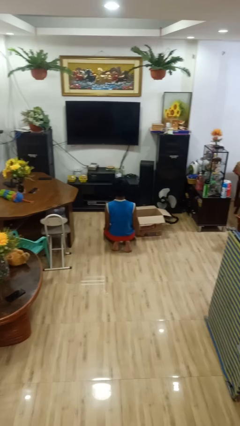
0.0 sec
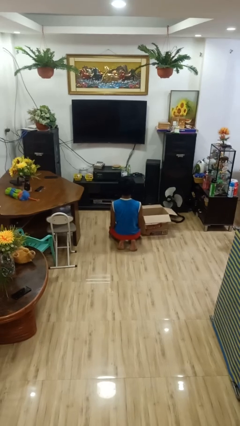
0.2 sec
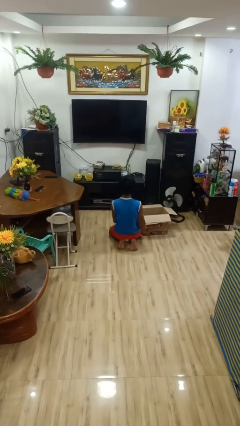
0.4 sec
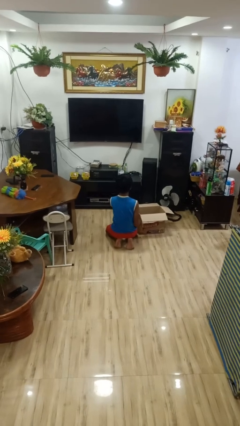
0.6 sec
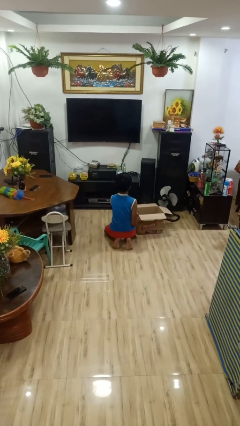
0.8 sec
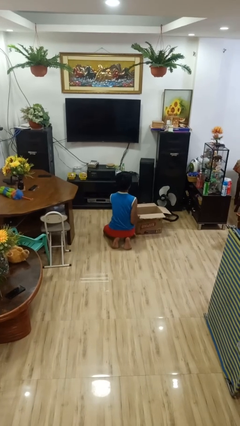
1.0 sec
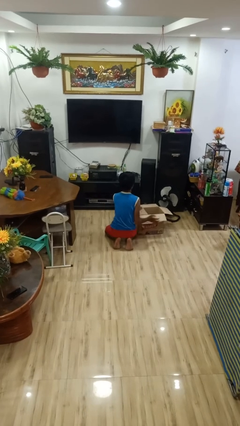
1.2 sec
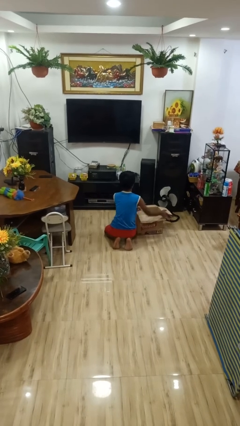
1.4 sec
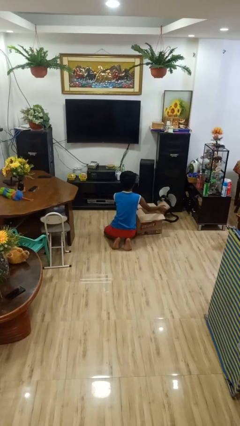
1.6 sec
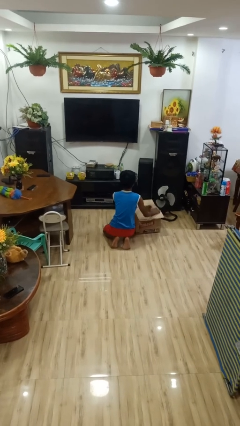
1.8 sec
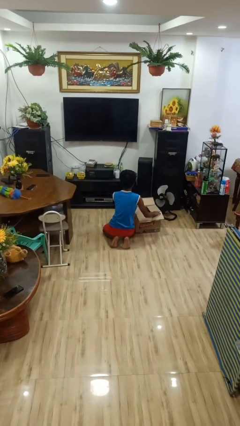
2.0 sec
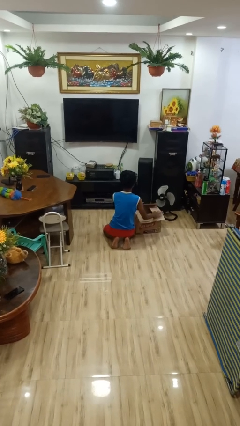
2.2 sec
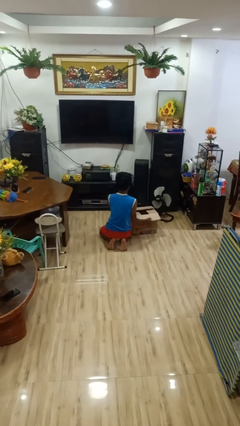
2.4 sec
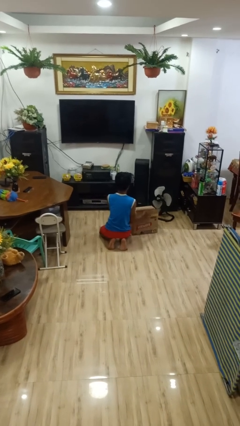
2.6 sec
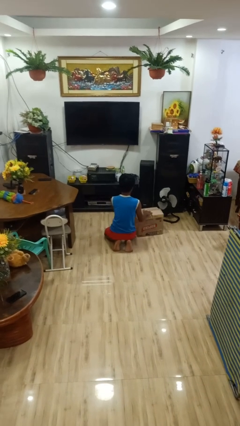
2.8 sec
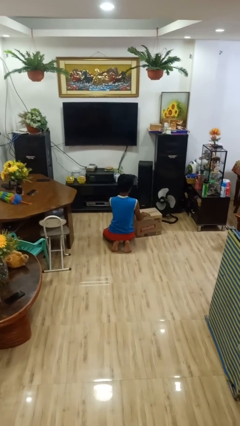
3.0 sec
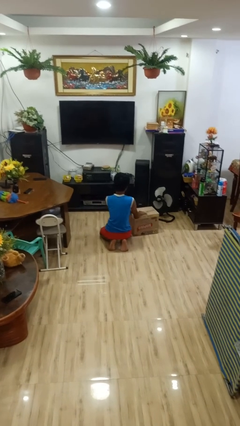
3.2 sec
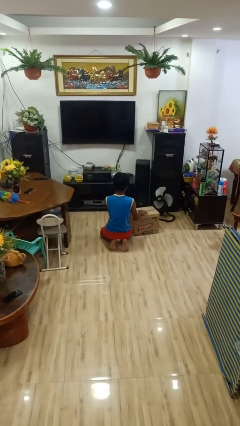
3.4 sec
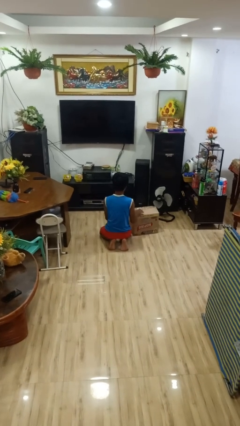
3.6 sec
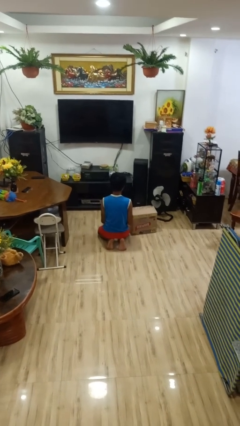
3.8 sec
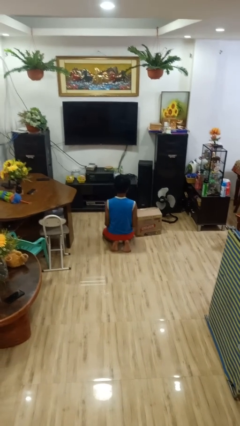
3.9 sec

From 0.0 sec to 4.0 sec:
person closes box

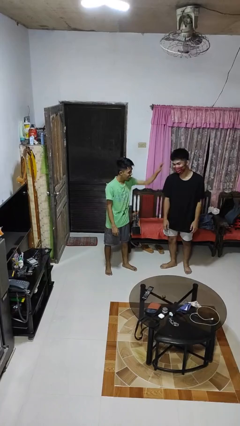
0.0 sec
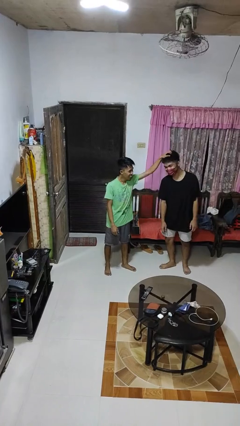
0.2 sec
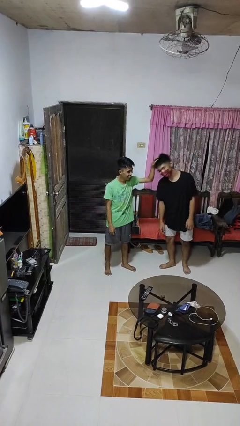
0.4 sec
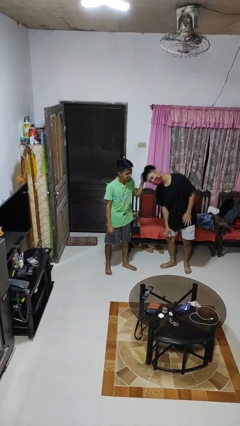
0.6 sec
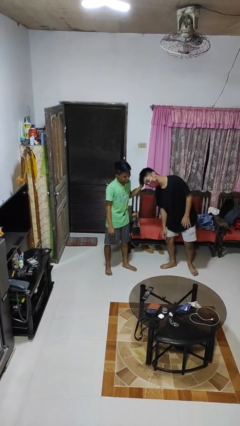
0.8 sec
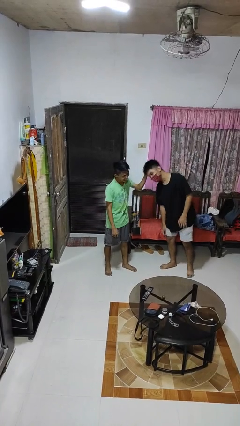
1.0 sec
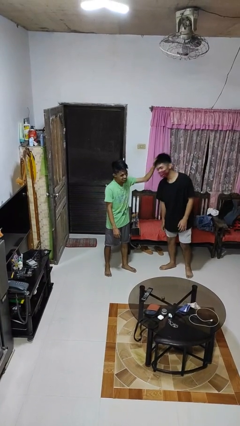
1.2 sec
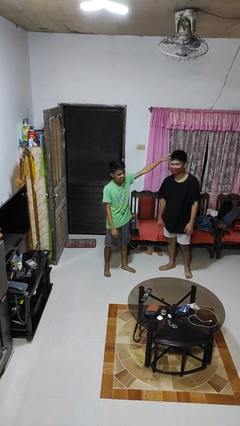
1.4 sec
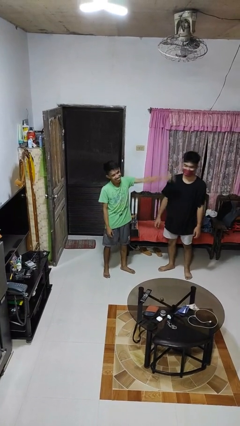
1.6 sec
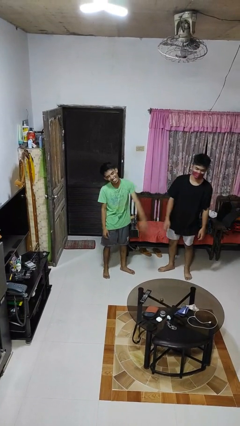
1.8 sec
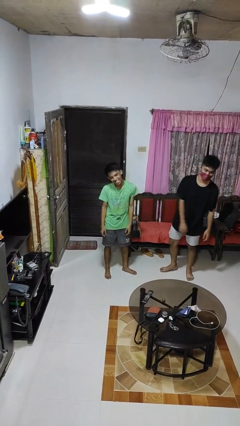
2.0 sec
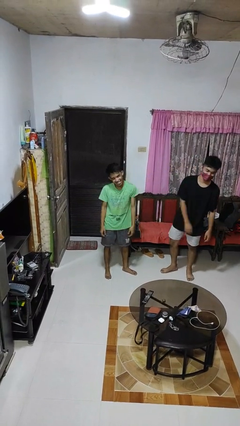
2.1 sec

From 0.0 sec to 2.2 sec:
person grabs person by hair

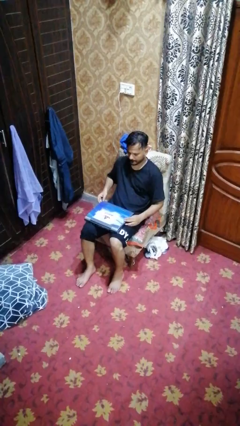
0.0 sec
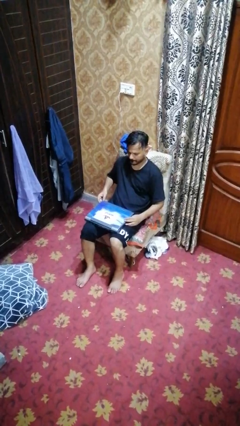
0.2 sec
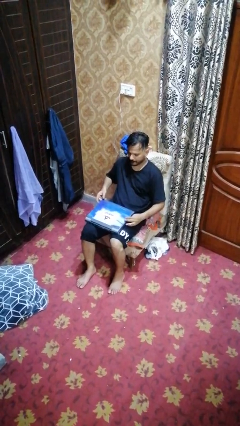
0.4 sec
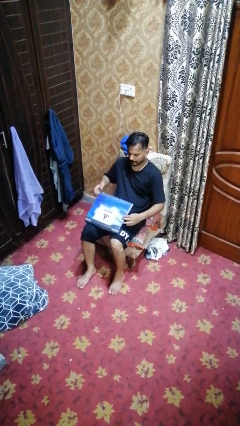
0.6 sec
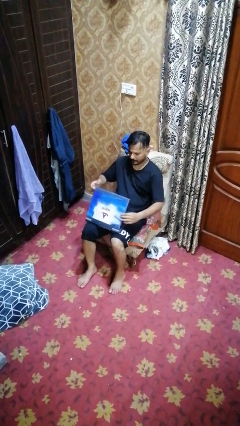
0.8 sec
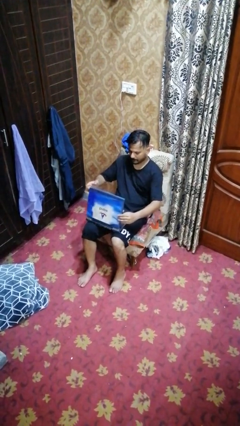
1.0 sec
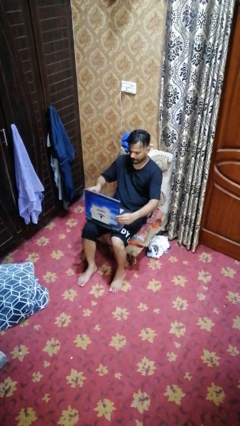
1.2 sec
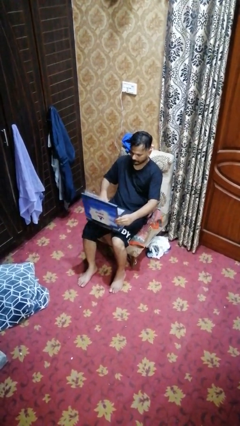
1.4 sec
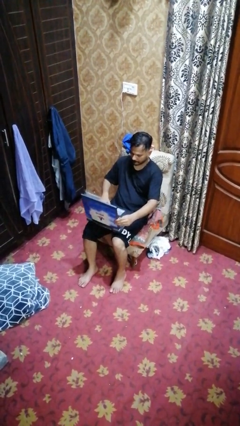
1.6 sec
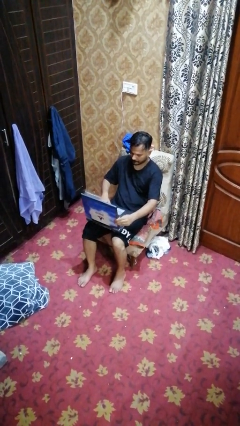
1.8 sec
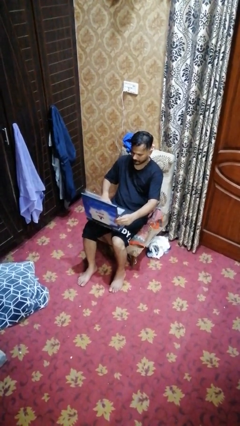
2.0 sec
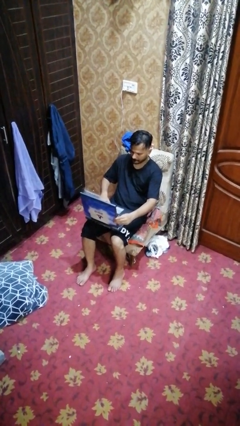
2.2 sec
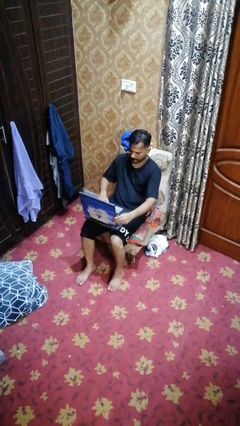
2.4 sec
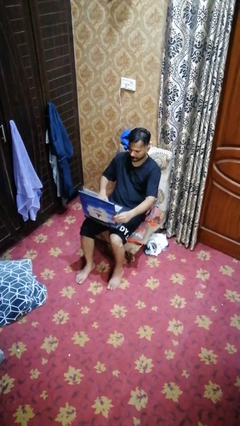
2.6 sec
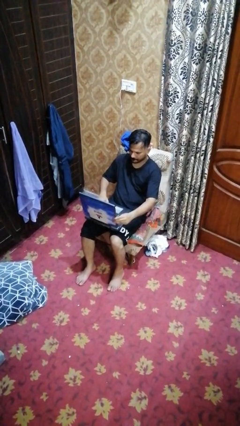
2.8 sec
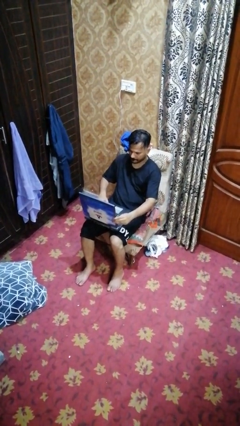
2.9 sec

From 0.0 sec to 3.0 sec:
person opens laptop

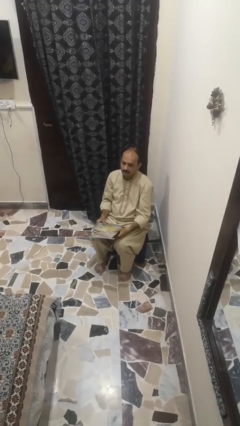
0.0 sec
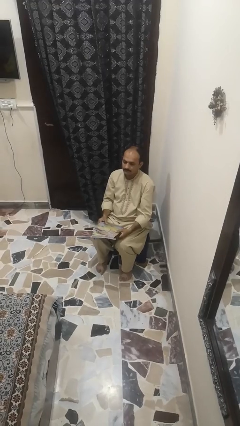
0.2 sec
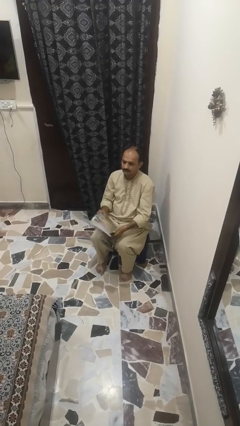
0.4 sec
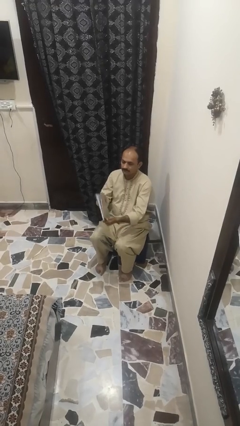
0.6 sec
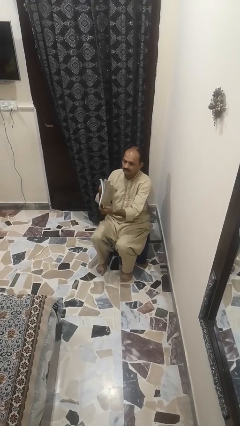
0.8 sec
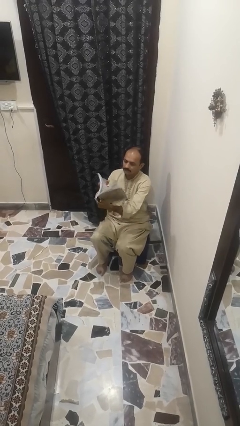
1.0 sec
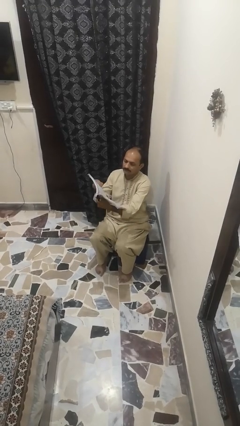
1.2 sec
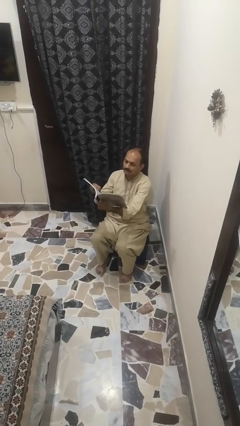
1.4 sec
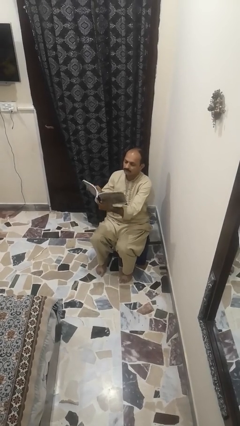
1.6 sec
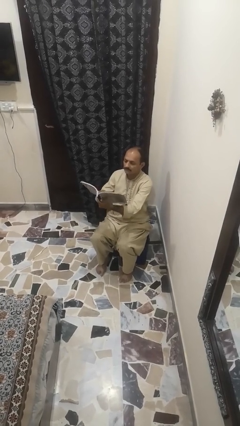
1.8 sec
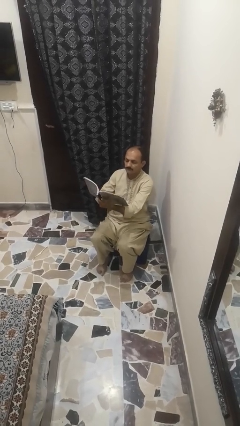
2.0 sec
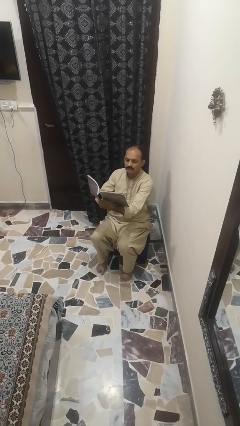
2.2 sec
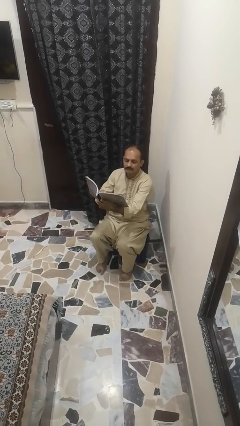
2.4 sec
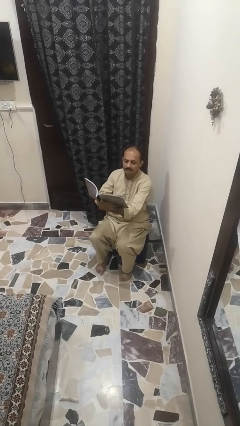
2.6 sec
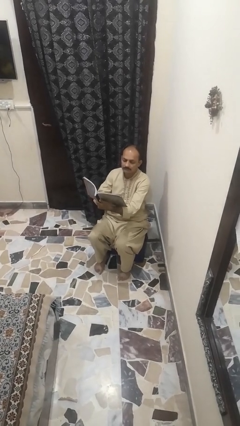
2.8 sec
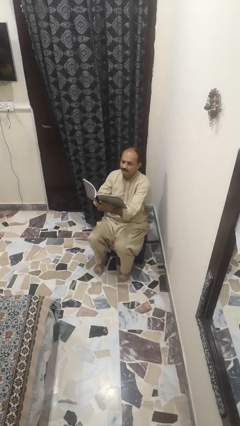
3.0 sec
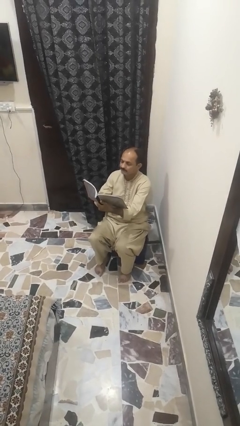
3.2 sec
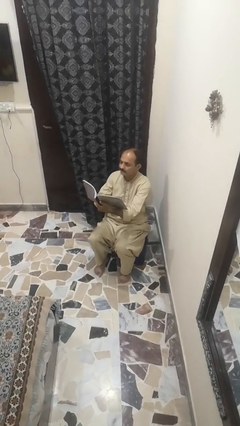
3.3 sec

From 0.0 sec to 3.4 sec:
person reads book

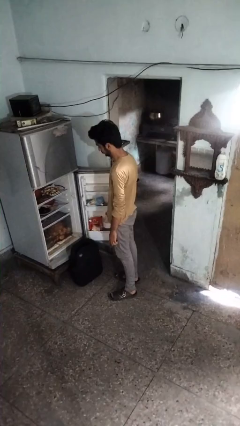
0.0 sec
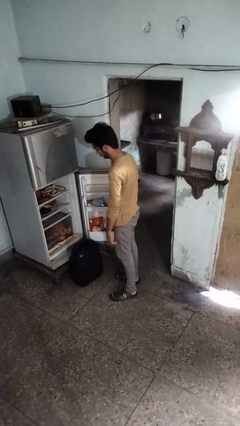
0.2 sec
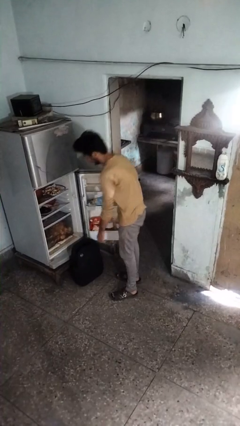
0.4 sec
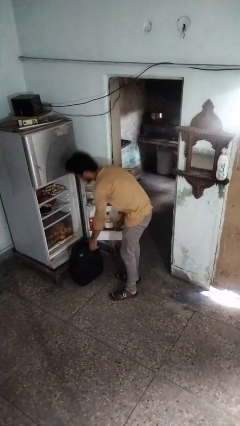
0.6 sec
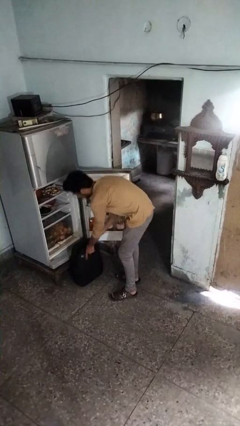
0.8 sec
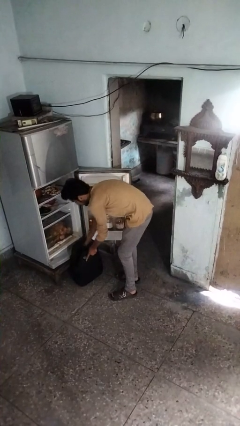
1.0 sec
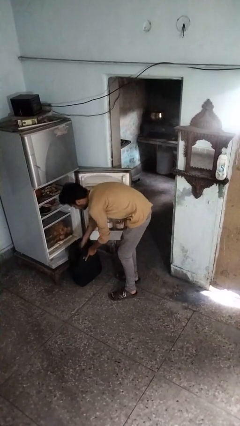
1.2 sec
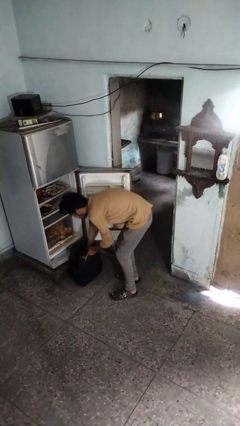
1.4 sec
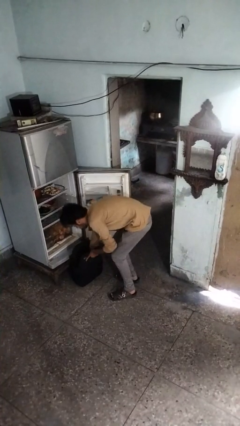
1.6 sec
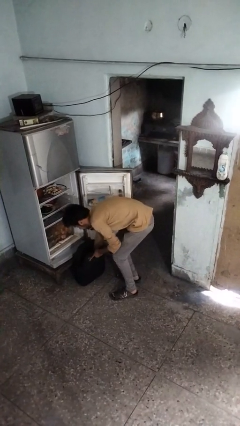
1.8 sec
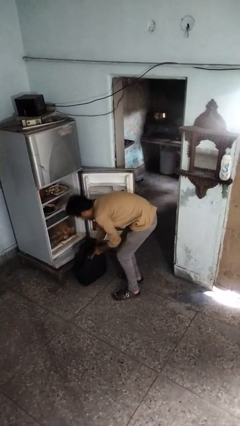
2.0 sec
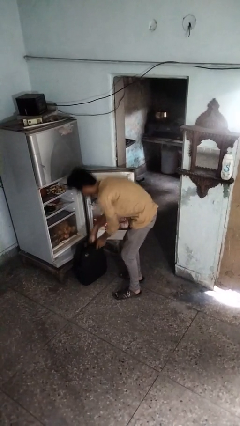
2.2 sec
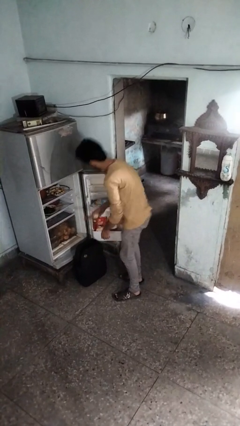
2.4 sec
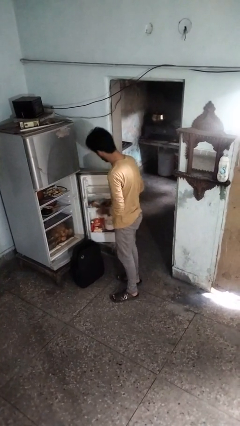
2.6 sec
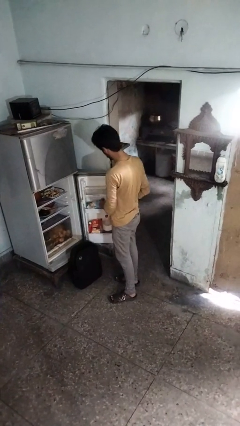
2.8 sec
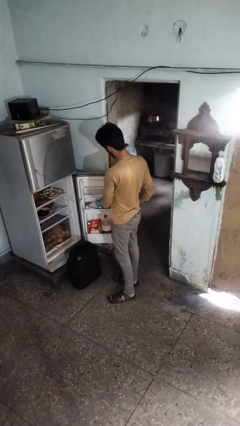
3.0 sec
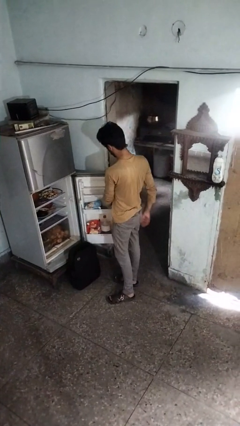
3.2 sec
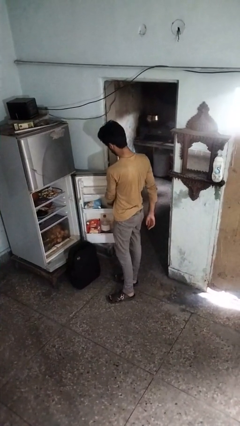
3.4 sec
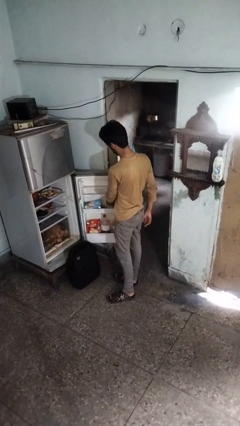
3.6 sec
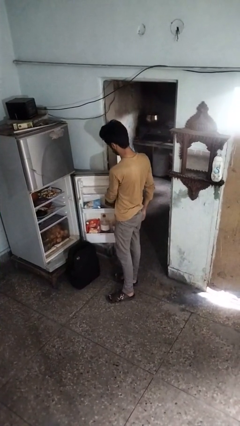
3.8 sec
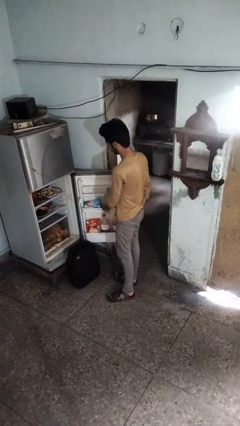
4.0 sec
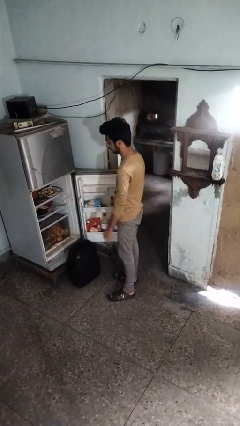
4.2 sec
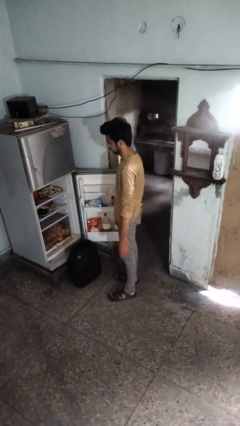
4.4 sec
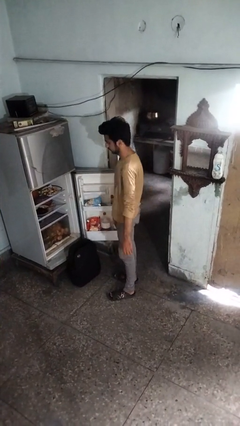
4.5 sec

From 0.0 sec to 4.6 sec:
person loads groceries into refrigerator

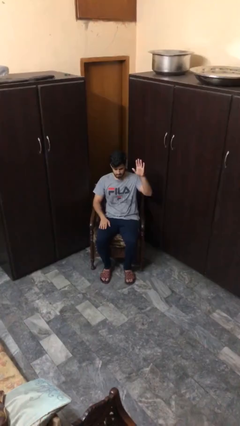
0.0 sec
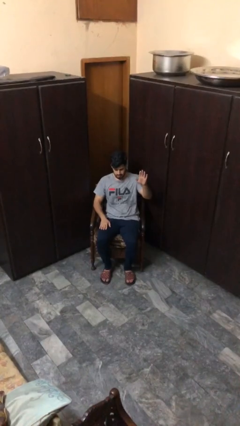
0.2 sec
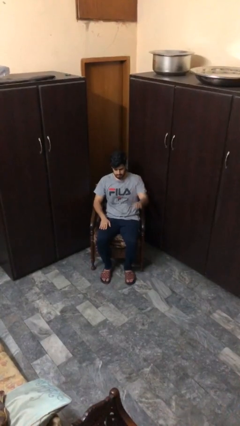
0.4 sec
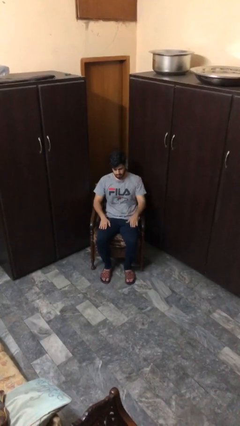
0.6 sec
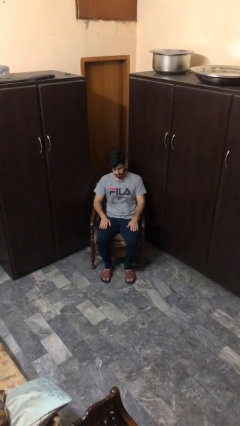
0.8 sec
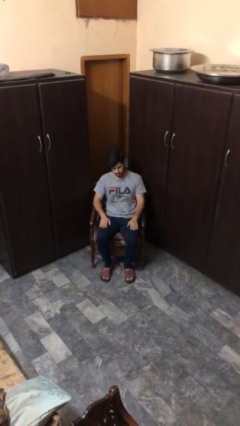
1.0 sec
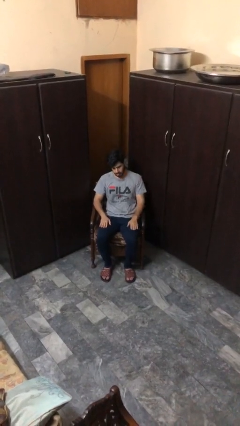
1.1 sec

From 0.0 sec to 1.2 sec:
person gestures lower hand
